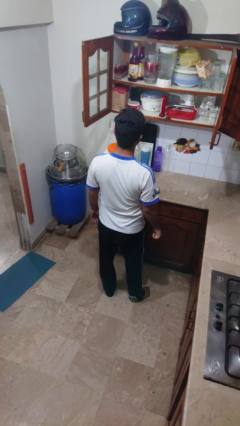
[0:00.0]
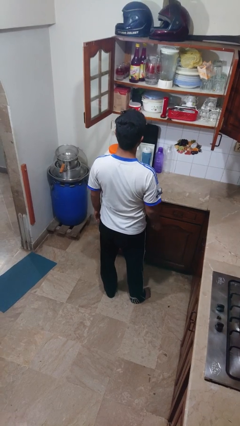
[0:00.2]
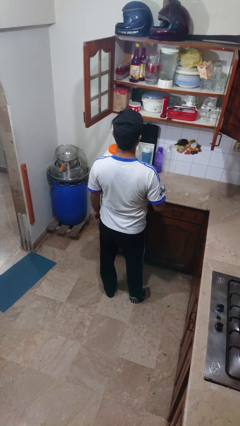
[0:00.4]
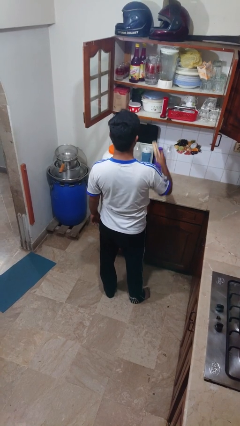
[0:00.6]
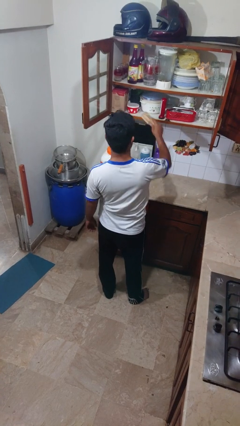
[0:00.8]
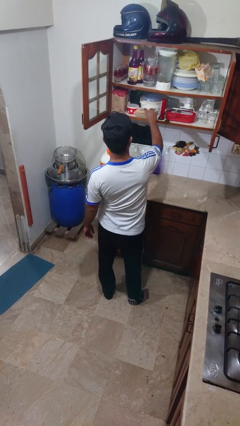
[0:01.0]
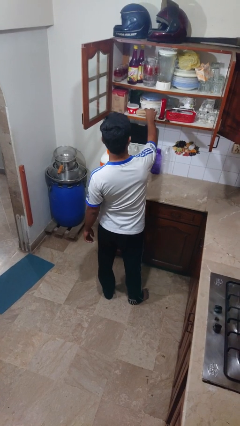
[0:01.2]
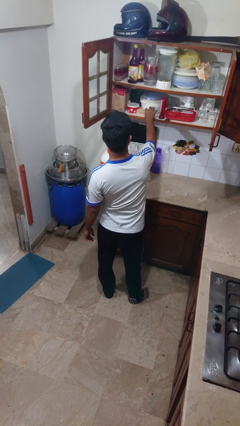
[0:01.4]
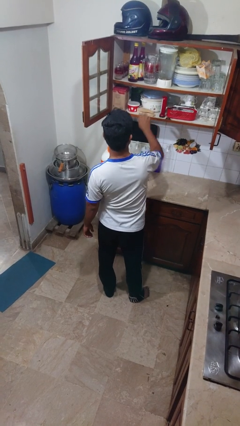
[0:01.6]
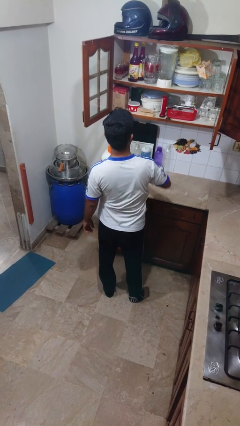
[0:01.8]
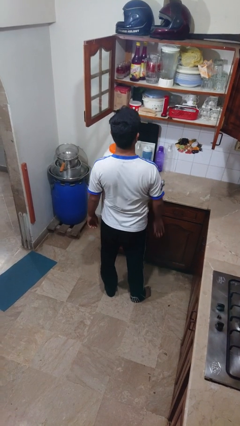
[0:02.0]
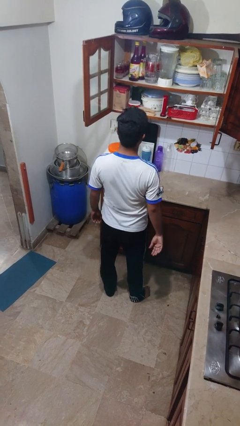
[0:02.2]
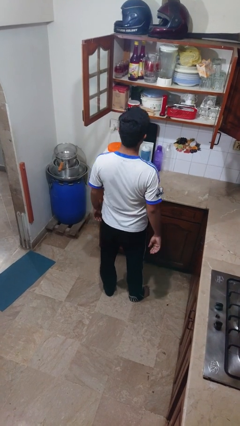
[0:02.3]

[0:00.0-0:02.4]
person puts down object into cabinet

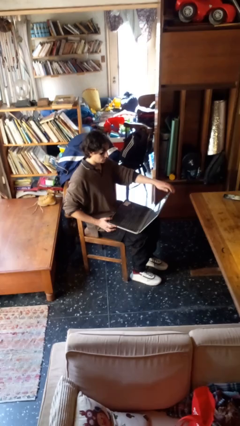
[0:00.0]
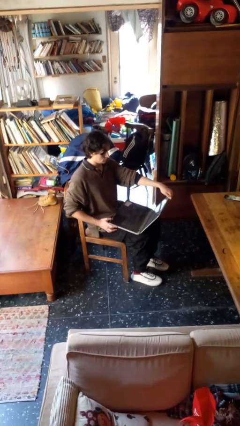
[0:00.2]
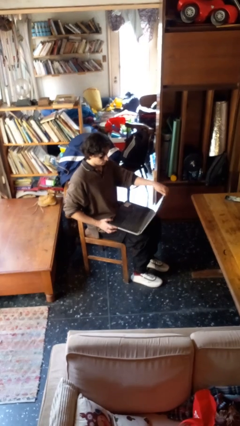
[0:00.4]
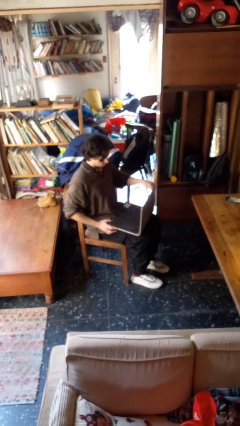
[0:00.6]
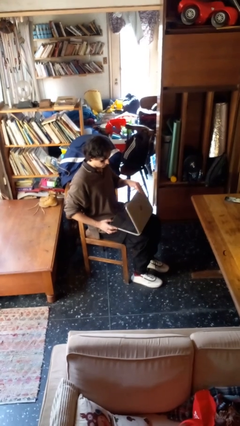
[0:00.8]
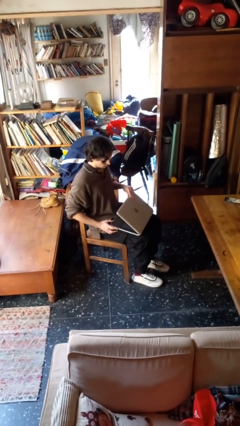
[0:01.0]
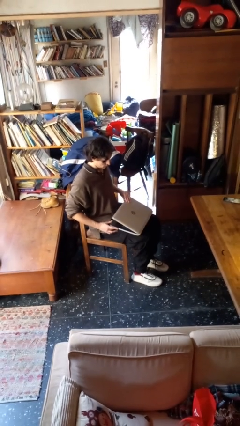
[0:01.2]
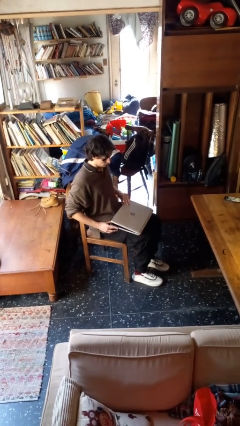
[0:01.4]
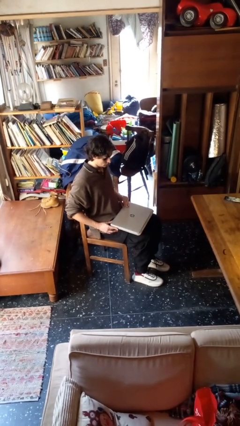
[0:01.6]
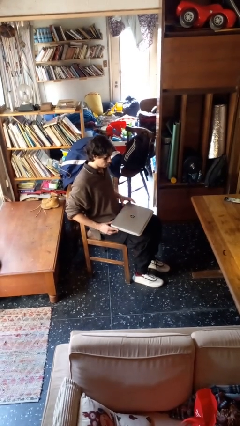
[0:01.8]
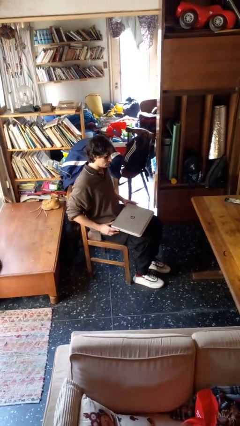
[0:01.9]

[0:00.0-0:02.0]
person closes laptop

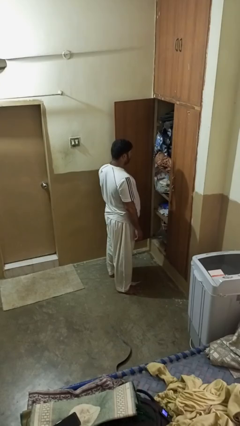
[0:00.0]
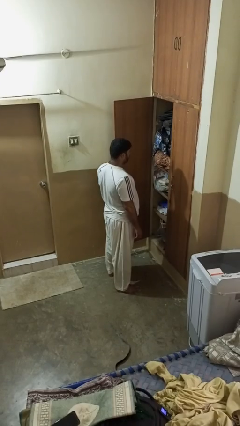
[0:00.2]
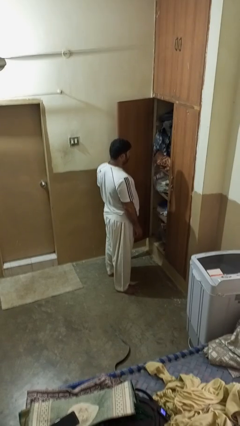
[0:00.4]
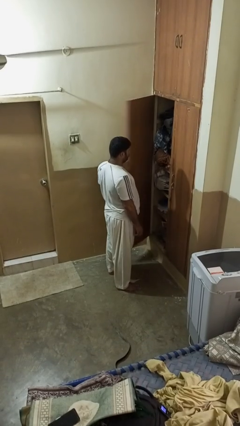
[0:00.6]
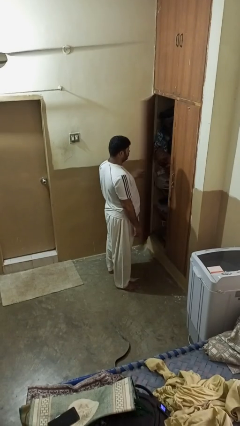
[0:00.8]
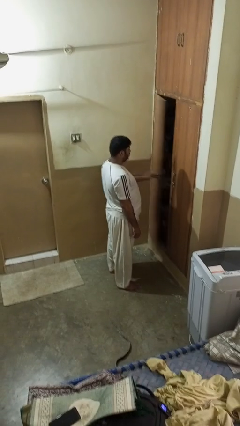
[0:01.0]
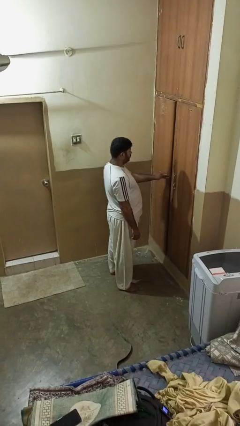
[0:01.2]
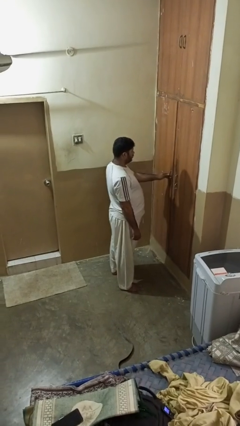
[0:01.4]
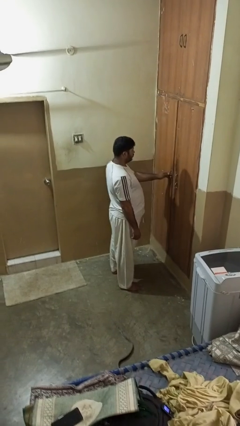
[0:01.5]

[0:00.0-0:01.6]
person closes closet door

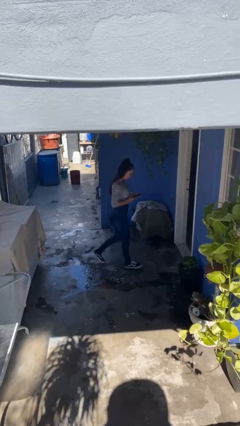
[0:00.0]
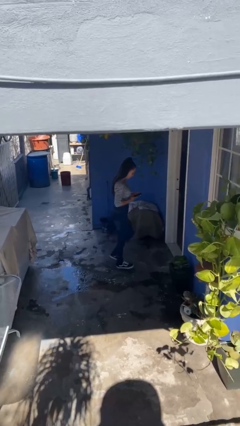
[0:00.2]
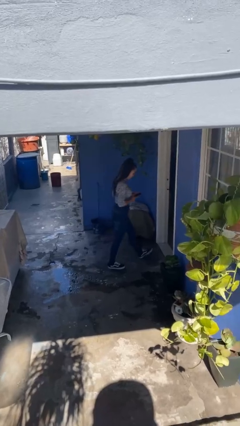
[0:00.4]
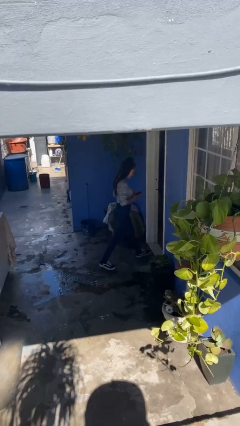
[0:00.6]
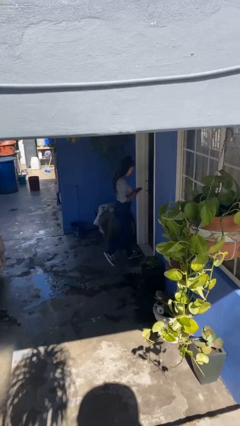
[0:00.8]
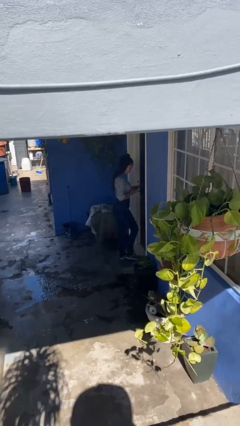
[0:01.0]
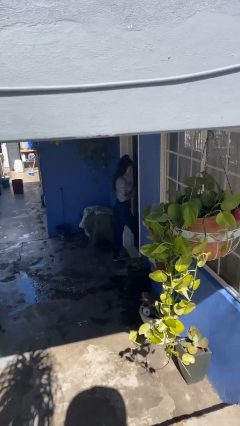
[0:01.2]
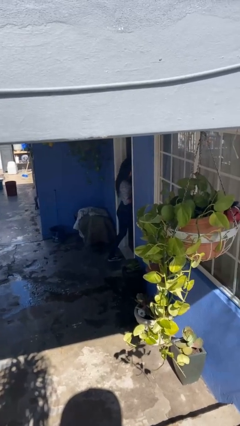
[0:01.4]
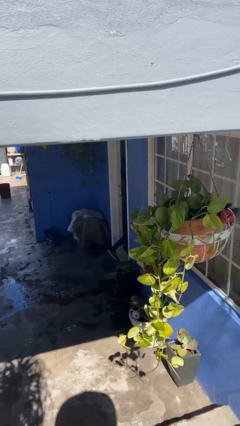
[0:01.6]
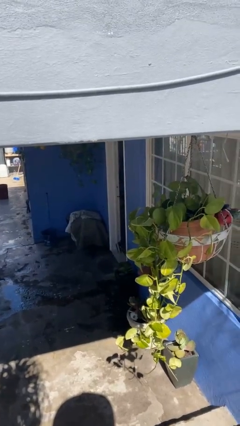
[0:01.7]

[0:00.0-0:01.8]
person exits scene through structure

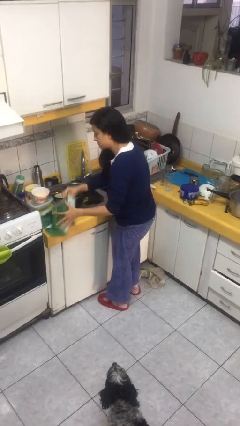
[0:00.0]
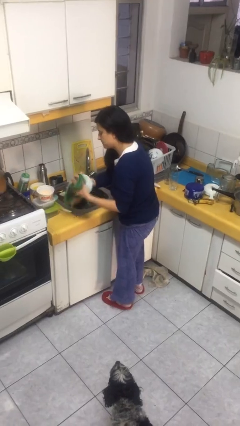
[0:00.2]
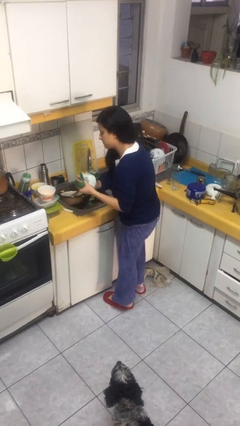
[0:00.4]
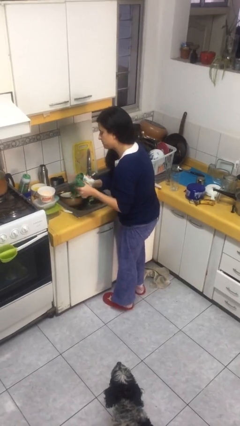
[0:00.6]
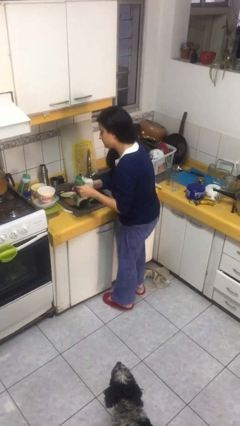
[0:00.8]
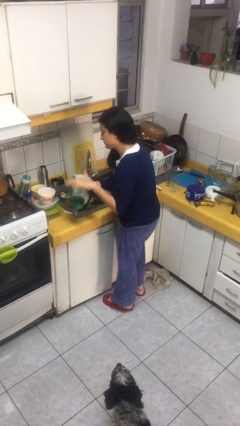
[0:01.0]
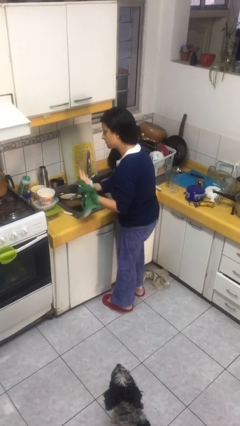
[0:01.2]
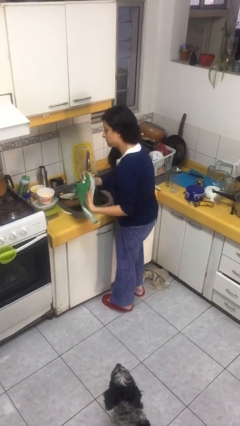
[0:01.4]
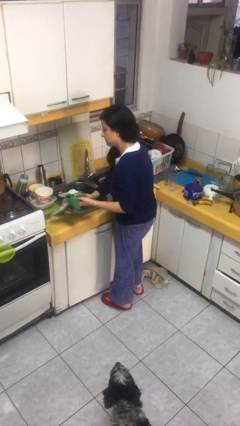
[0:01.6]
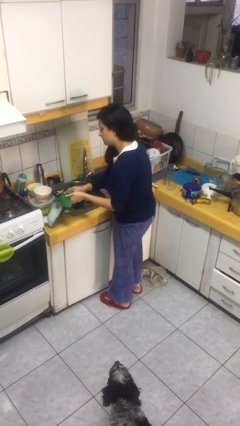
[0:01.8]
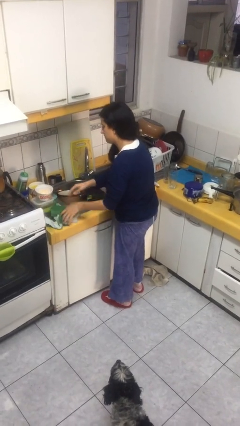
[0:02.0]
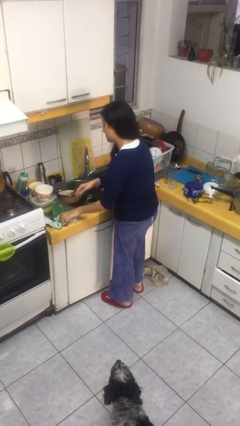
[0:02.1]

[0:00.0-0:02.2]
person dries hands with towel

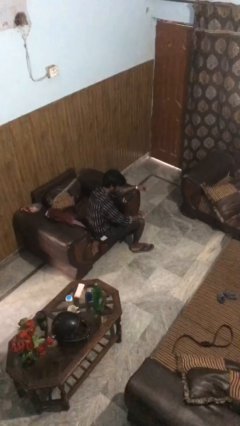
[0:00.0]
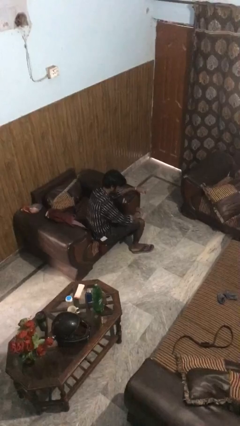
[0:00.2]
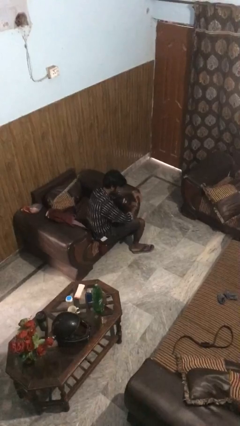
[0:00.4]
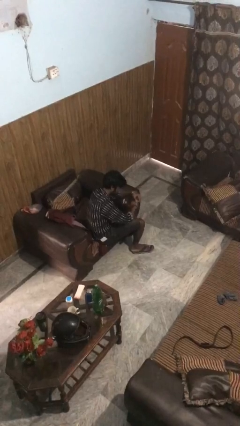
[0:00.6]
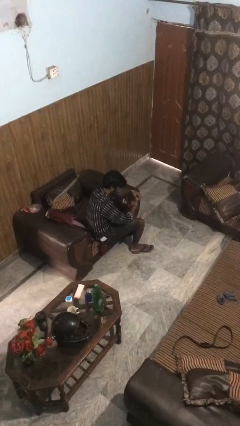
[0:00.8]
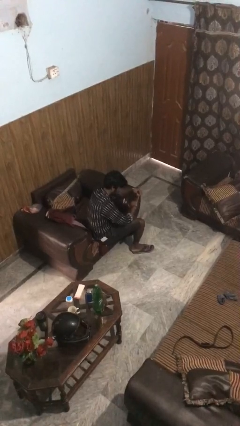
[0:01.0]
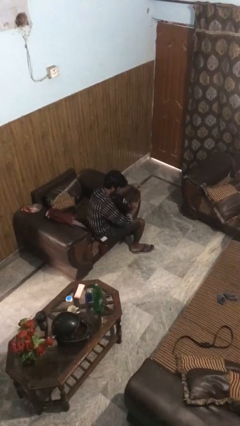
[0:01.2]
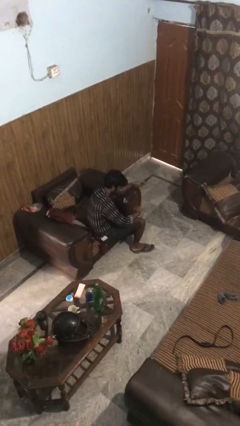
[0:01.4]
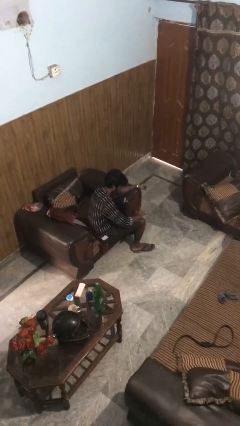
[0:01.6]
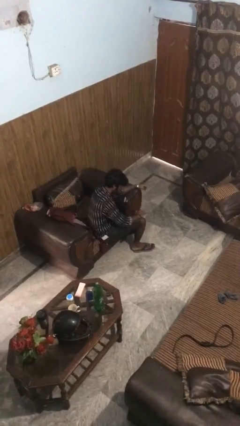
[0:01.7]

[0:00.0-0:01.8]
person takes off ring

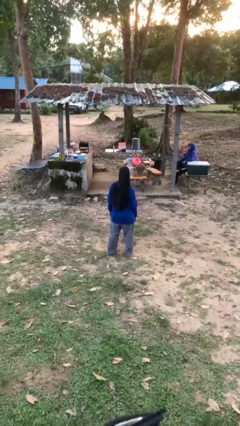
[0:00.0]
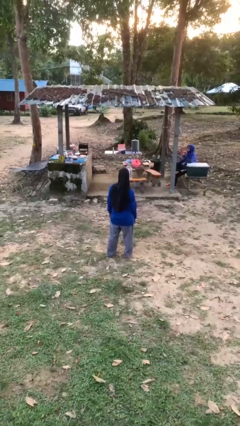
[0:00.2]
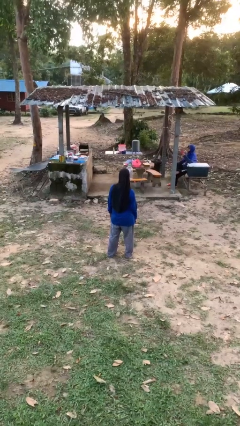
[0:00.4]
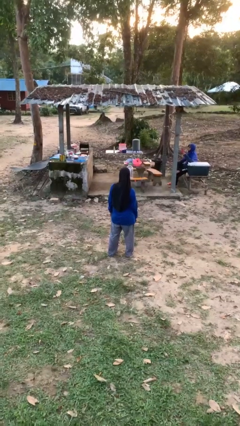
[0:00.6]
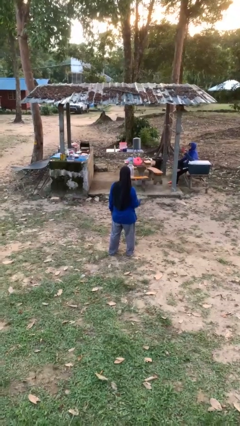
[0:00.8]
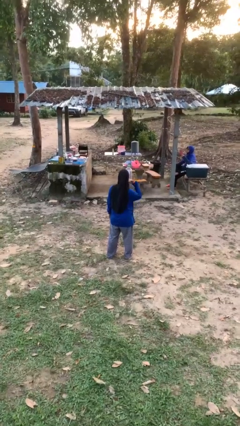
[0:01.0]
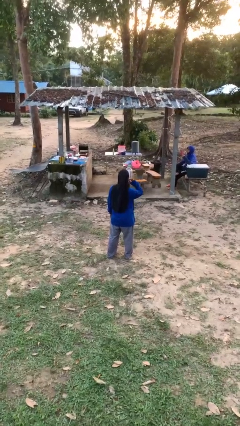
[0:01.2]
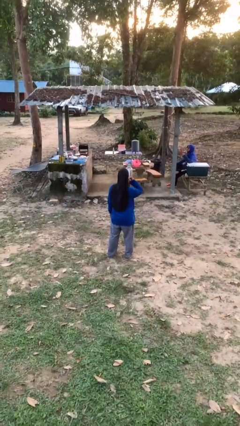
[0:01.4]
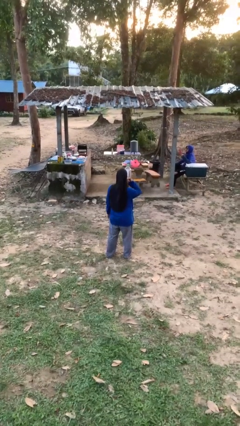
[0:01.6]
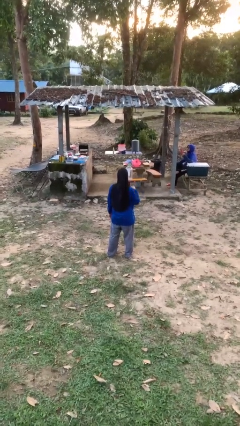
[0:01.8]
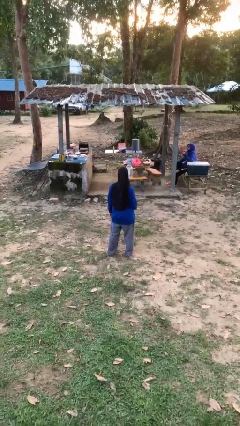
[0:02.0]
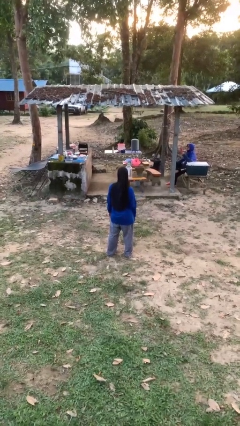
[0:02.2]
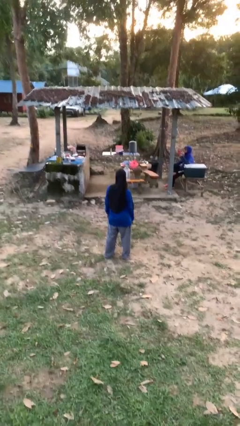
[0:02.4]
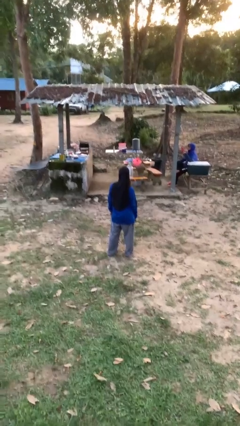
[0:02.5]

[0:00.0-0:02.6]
person gestures call me

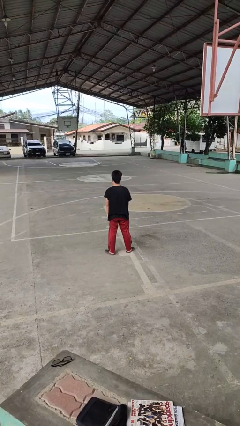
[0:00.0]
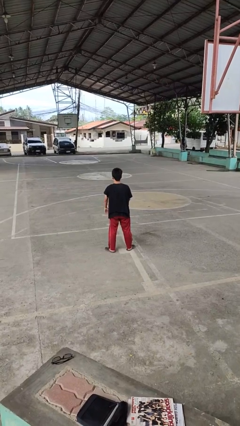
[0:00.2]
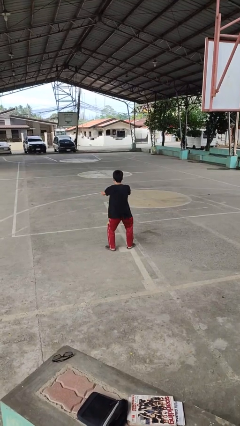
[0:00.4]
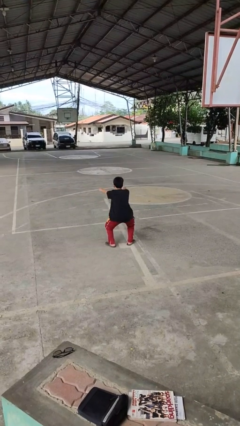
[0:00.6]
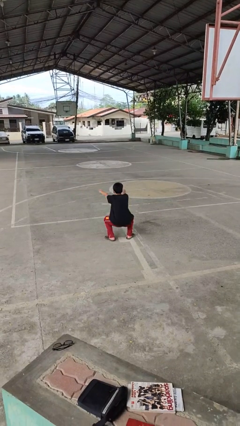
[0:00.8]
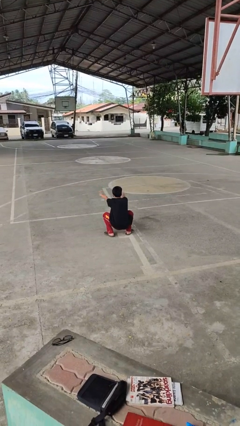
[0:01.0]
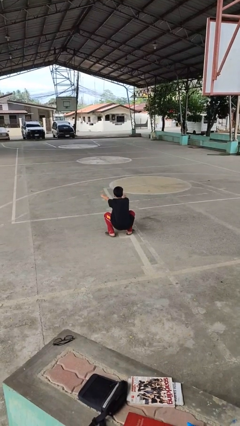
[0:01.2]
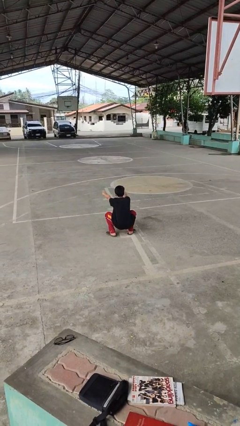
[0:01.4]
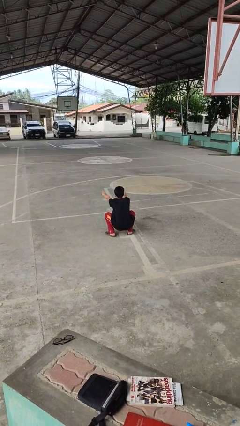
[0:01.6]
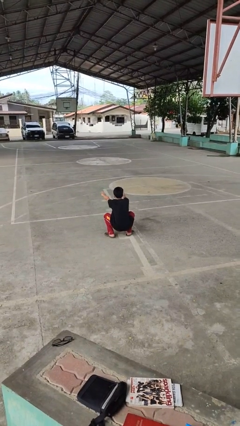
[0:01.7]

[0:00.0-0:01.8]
person squats

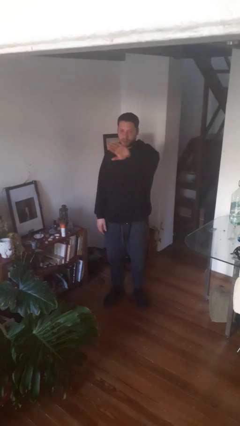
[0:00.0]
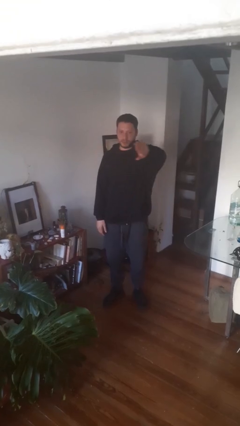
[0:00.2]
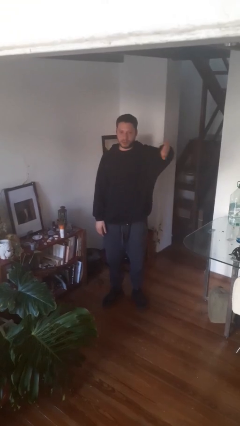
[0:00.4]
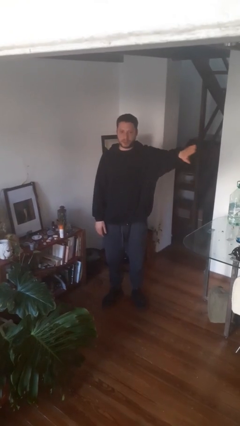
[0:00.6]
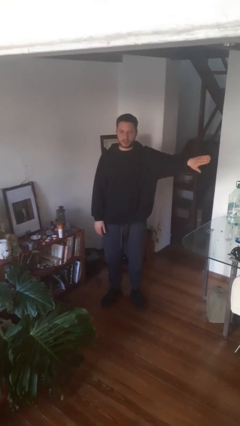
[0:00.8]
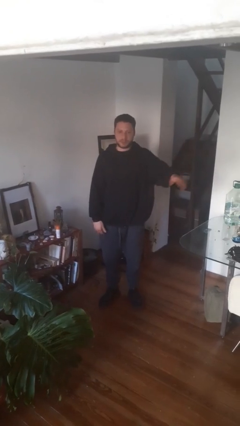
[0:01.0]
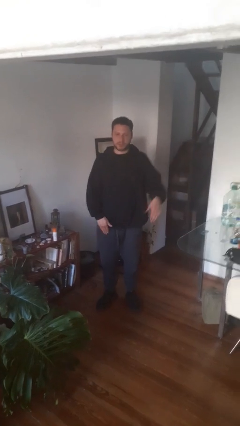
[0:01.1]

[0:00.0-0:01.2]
person gestures swipe left
